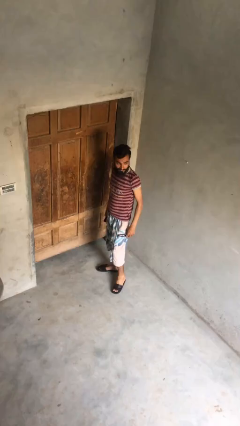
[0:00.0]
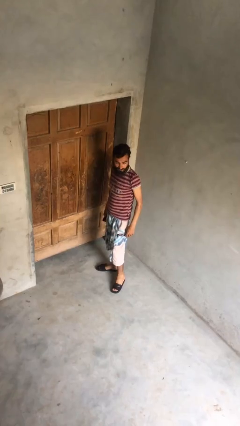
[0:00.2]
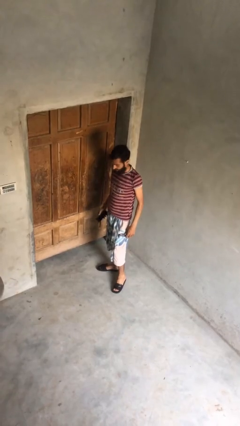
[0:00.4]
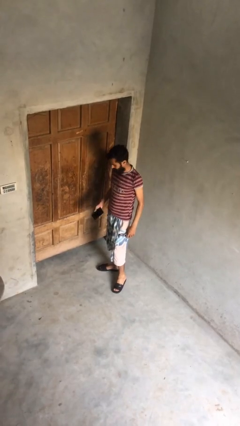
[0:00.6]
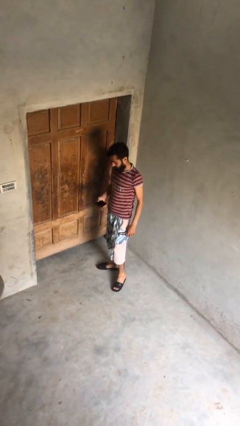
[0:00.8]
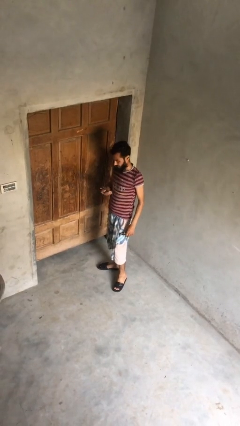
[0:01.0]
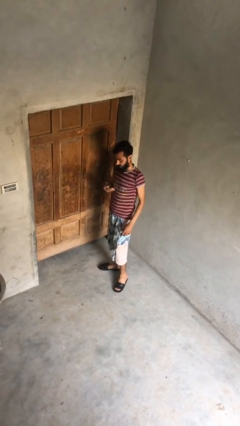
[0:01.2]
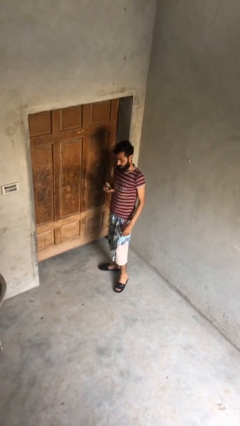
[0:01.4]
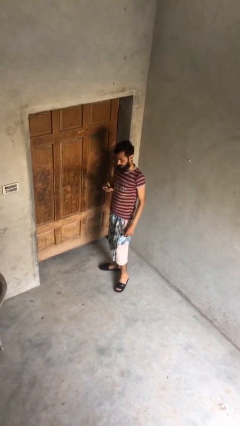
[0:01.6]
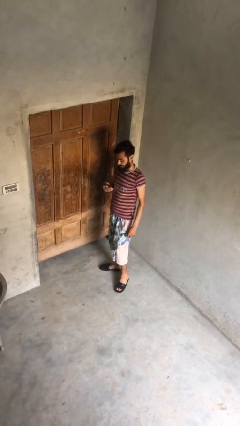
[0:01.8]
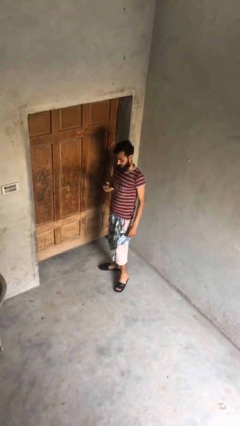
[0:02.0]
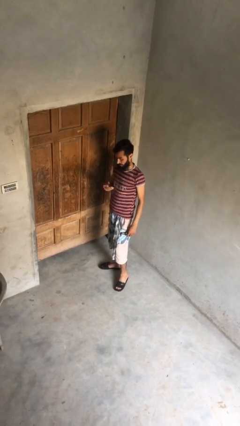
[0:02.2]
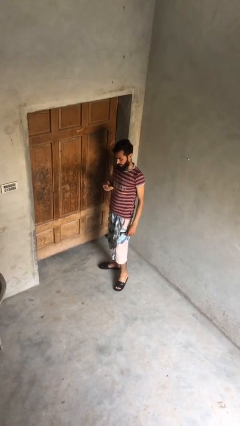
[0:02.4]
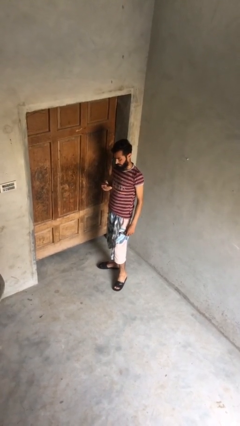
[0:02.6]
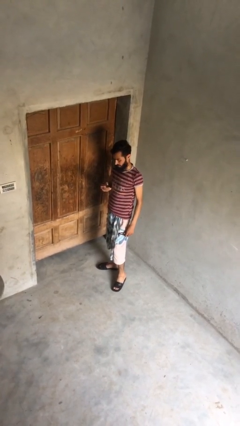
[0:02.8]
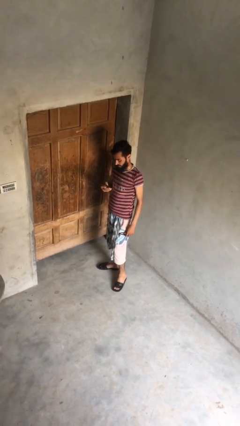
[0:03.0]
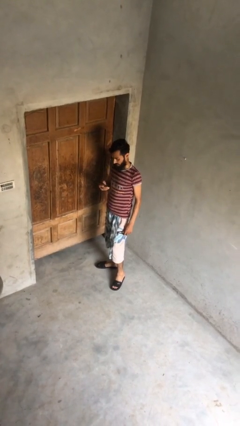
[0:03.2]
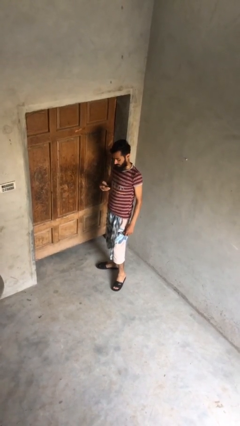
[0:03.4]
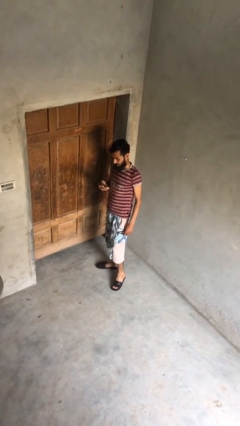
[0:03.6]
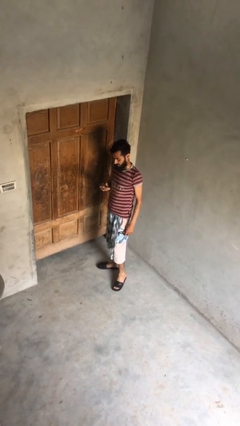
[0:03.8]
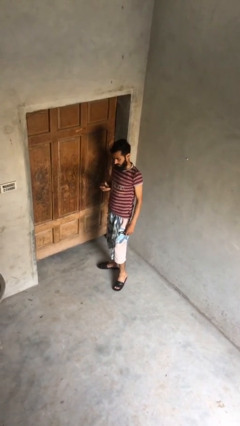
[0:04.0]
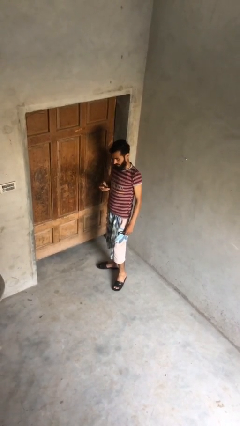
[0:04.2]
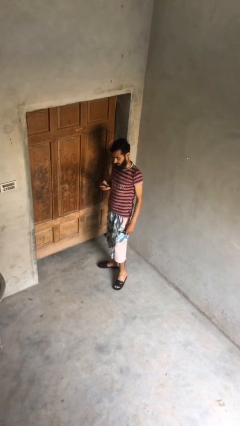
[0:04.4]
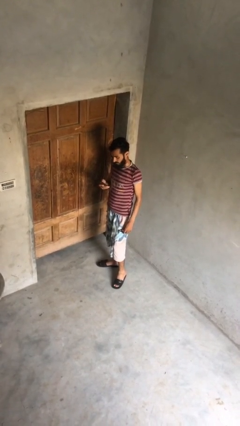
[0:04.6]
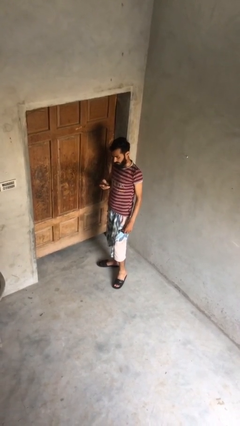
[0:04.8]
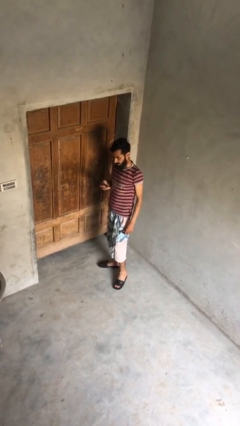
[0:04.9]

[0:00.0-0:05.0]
person texts on phone

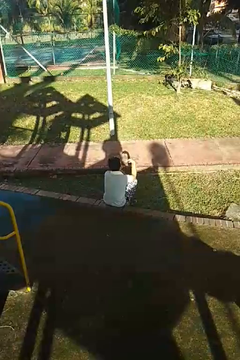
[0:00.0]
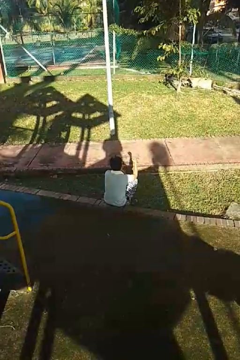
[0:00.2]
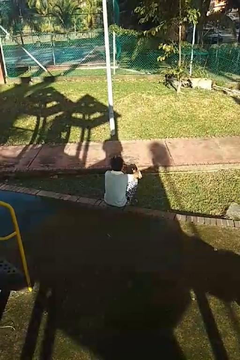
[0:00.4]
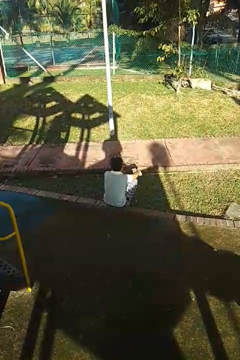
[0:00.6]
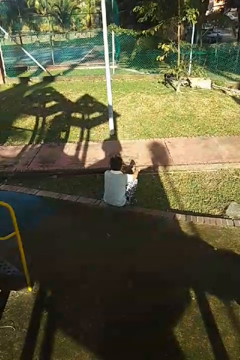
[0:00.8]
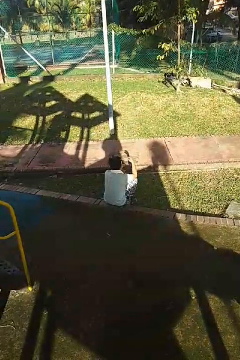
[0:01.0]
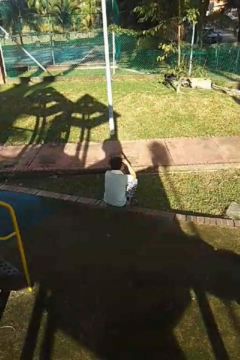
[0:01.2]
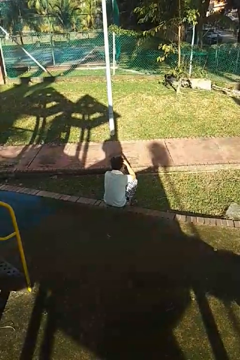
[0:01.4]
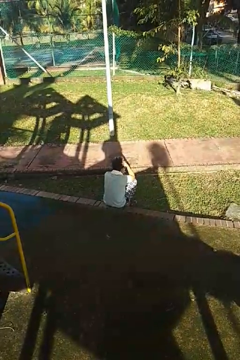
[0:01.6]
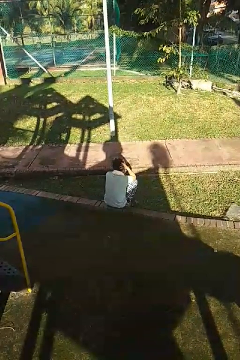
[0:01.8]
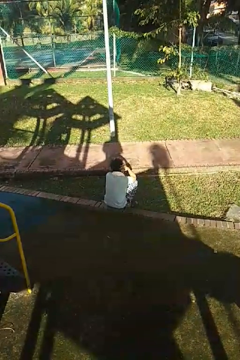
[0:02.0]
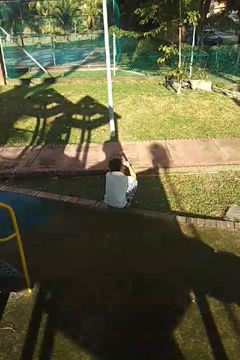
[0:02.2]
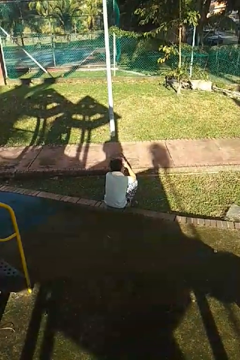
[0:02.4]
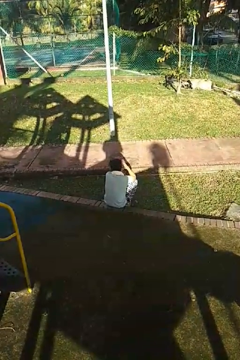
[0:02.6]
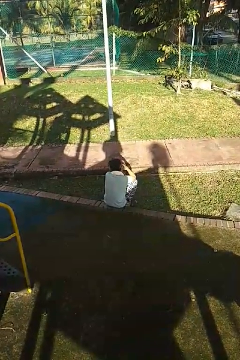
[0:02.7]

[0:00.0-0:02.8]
person strokes hair

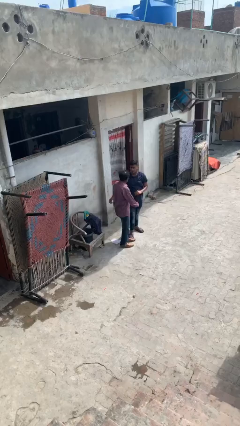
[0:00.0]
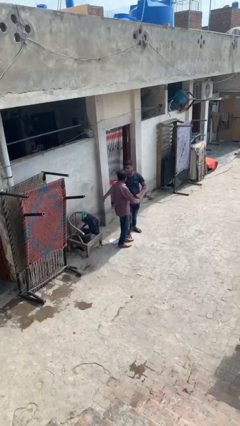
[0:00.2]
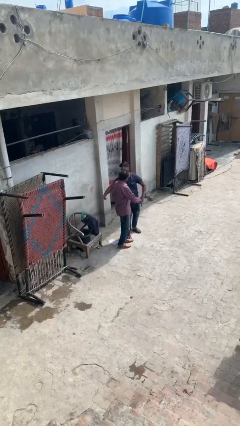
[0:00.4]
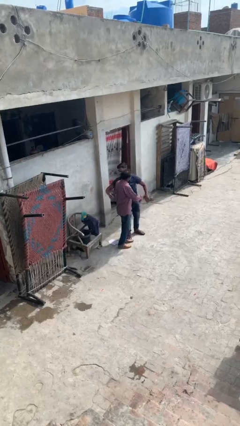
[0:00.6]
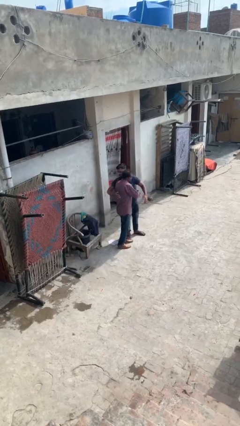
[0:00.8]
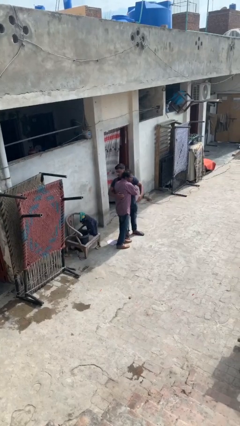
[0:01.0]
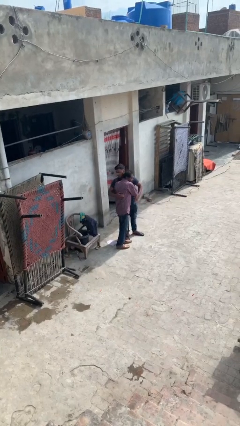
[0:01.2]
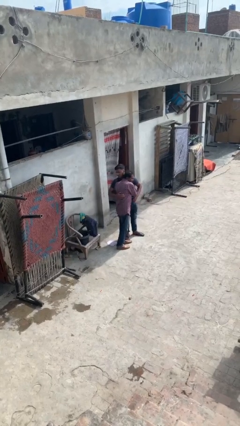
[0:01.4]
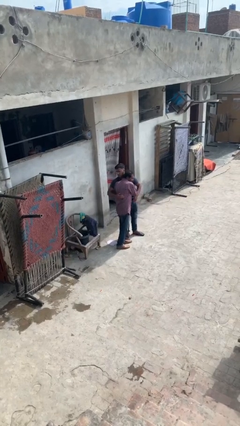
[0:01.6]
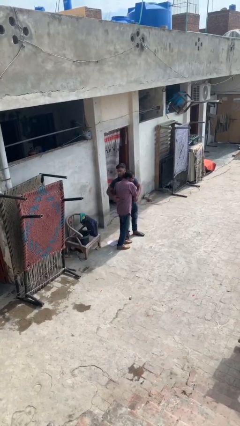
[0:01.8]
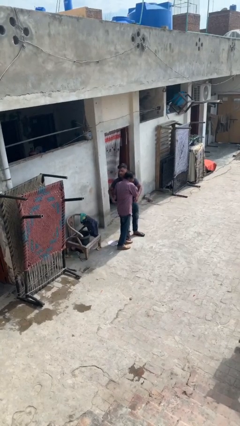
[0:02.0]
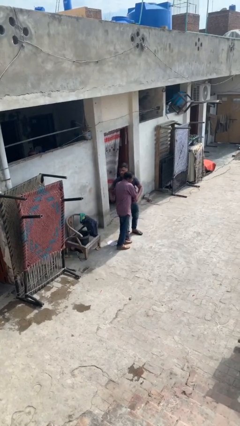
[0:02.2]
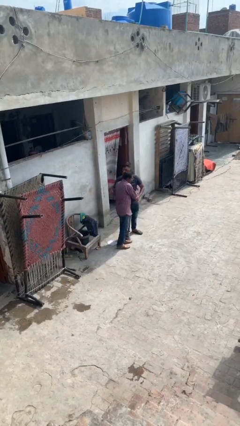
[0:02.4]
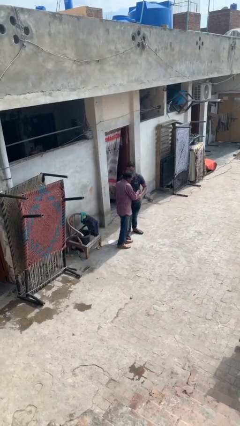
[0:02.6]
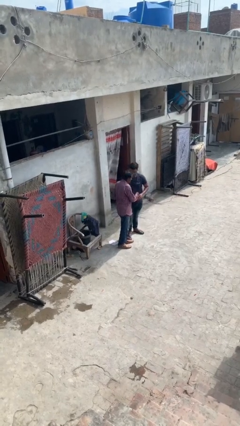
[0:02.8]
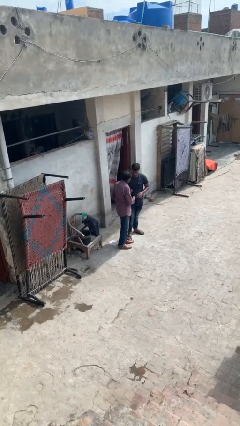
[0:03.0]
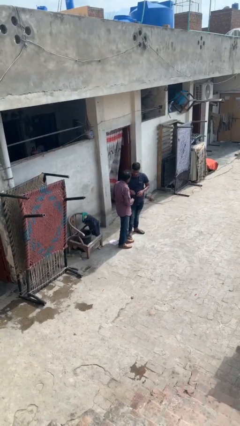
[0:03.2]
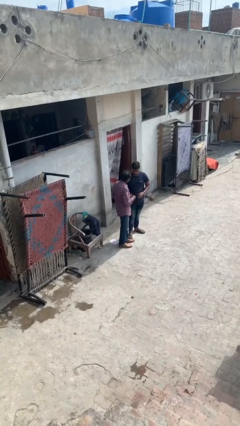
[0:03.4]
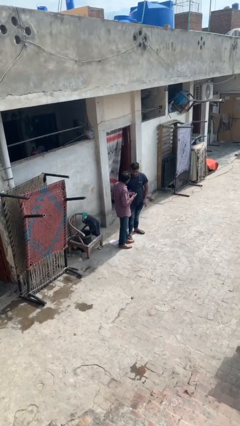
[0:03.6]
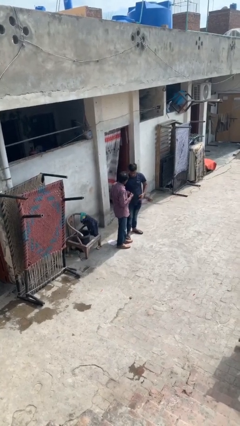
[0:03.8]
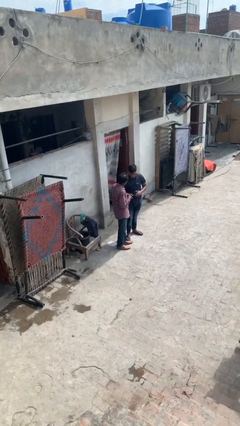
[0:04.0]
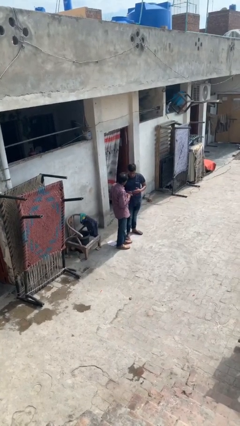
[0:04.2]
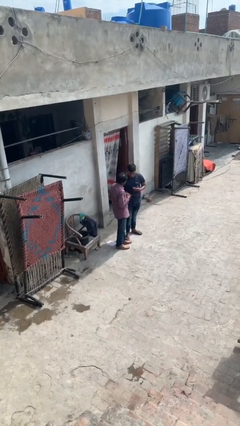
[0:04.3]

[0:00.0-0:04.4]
person embraces person

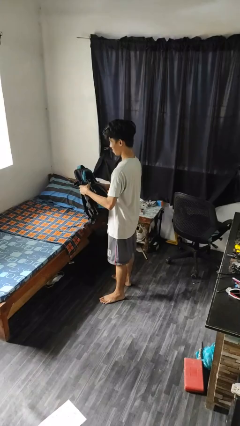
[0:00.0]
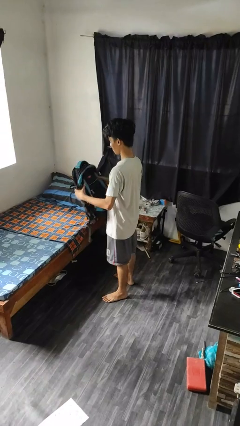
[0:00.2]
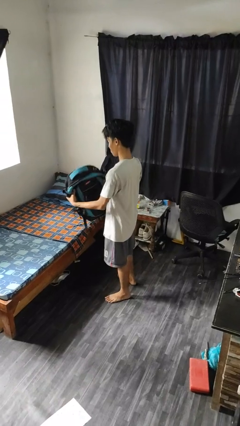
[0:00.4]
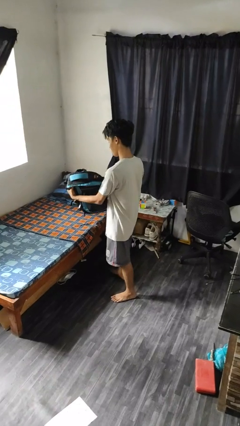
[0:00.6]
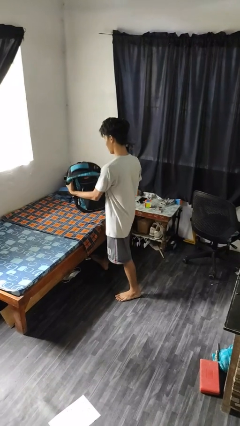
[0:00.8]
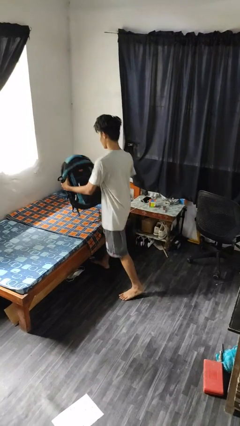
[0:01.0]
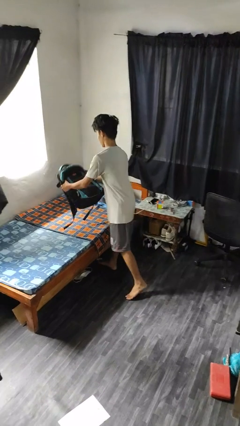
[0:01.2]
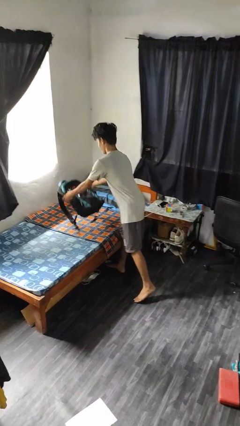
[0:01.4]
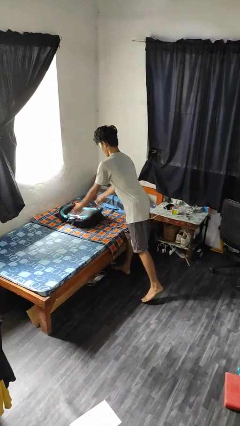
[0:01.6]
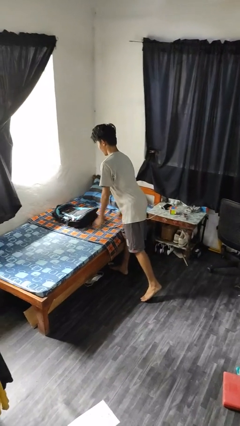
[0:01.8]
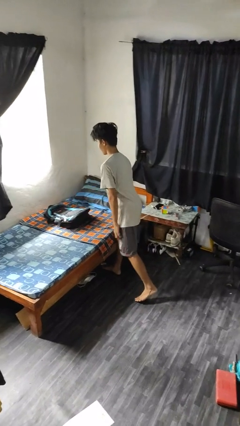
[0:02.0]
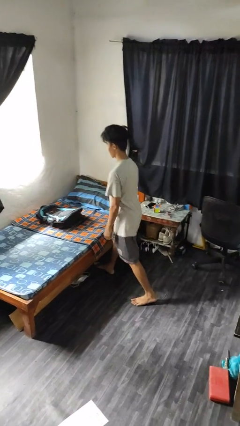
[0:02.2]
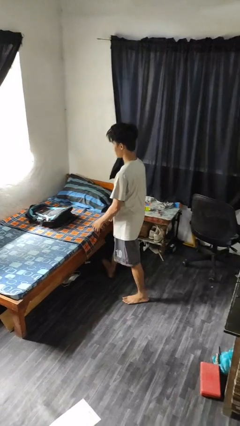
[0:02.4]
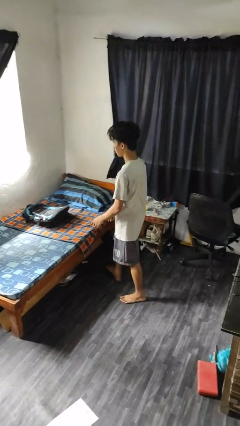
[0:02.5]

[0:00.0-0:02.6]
person puts down object on bed

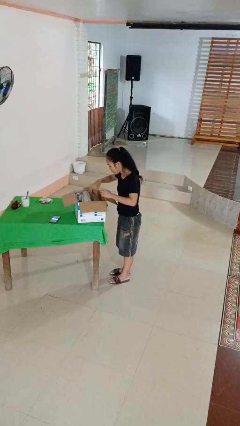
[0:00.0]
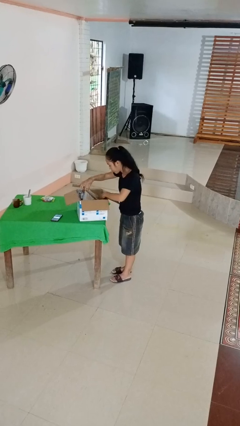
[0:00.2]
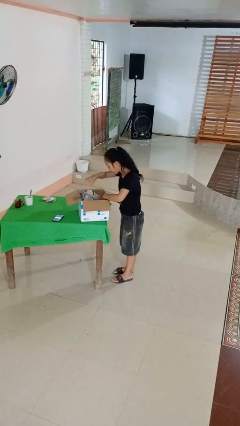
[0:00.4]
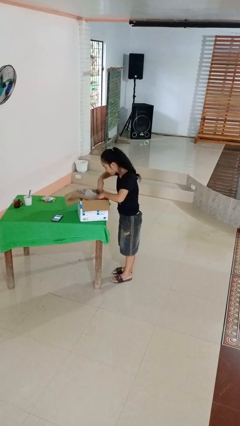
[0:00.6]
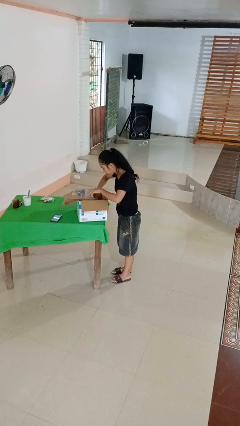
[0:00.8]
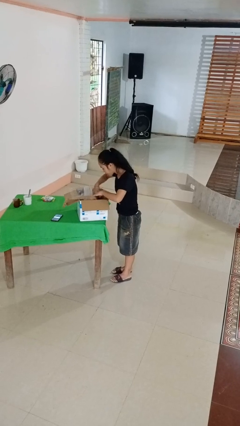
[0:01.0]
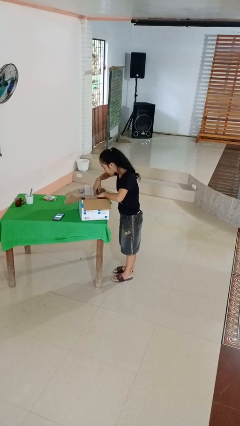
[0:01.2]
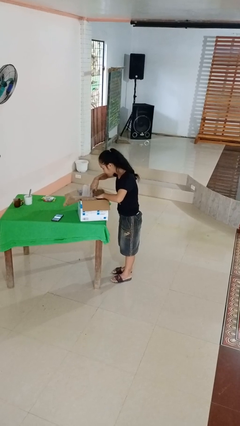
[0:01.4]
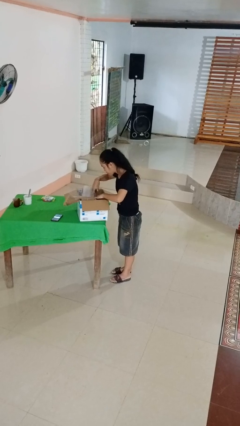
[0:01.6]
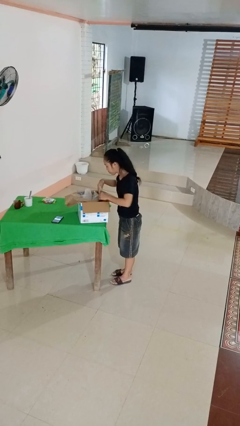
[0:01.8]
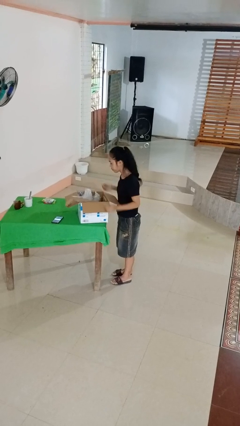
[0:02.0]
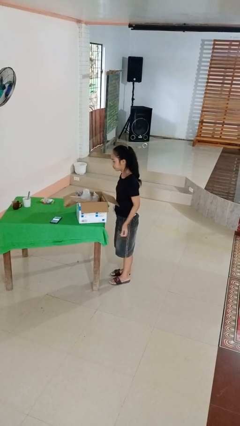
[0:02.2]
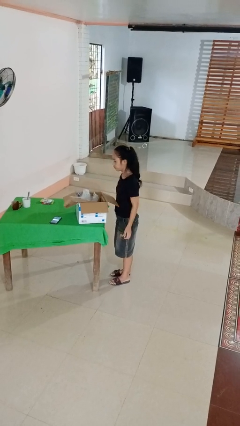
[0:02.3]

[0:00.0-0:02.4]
person searches in box

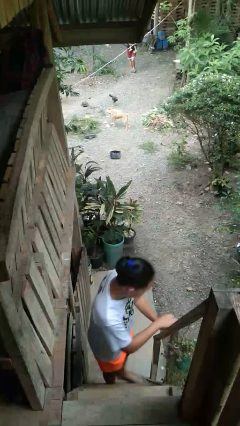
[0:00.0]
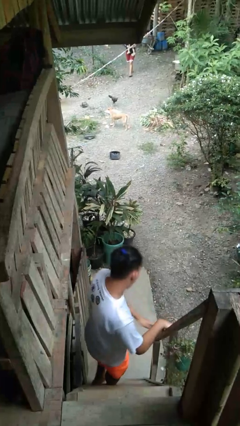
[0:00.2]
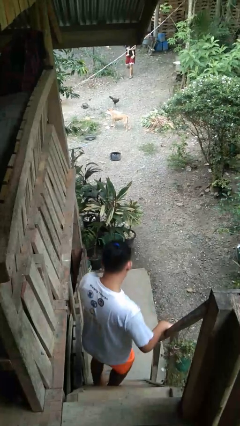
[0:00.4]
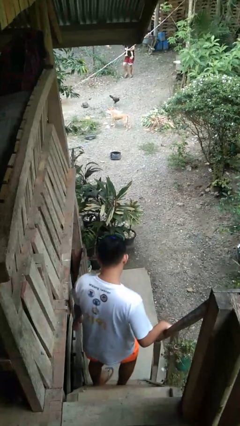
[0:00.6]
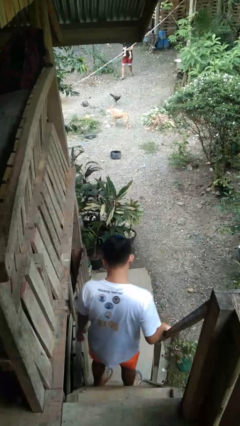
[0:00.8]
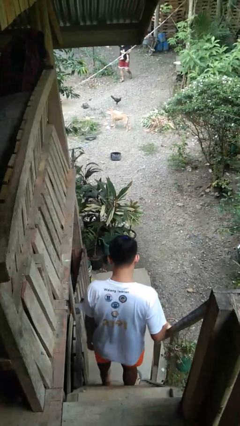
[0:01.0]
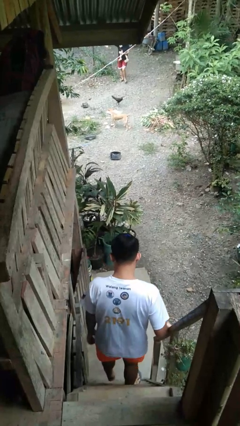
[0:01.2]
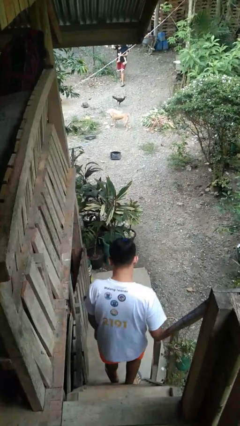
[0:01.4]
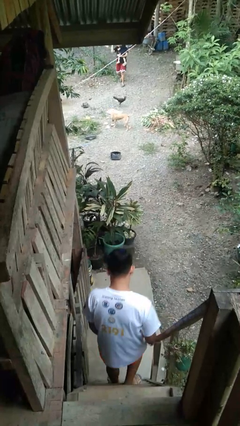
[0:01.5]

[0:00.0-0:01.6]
person climbs down stairs
